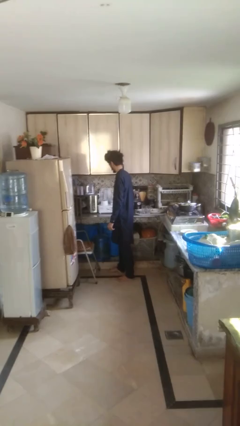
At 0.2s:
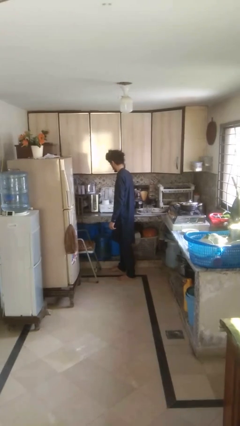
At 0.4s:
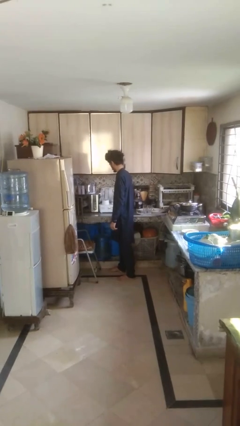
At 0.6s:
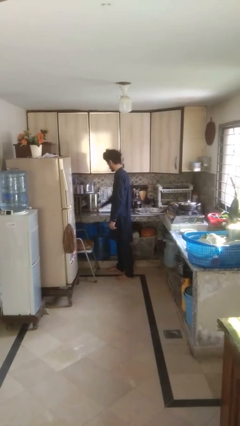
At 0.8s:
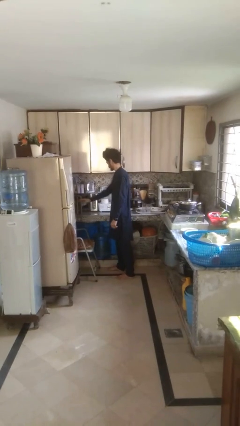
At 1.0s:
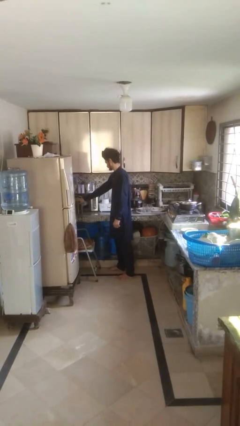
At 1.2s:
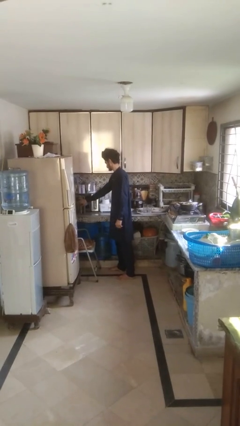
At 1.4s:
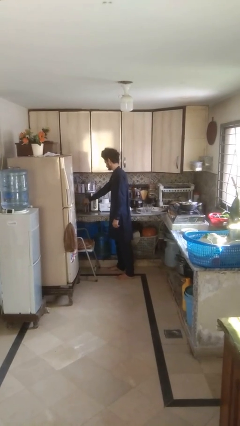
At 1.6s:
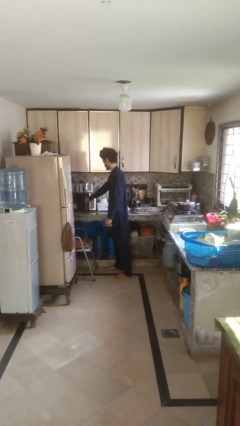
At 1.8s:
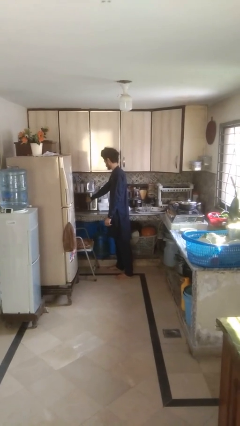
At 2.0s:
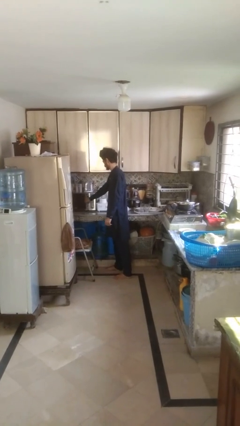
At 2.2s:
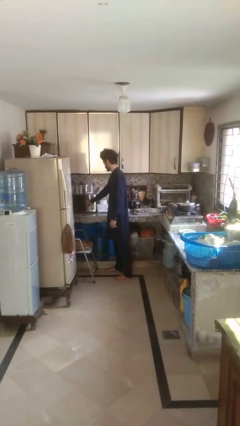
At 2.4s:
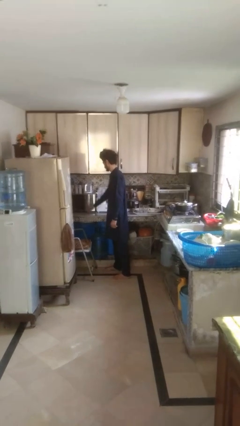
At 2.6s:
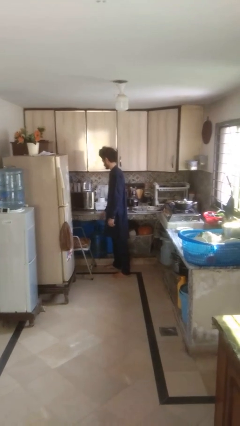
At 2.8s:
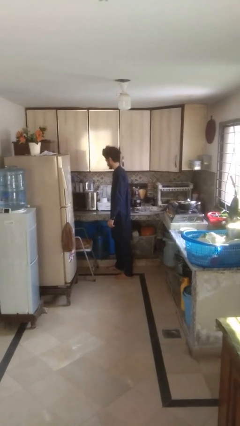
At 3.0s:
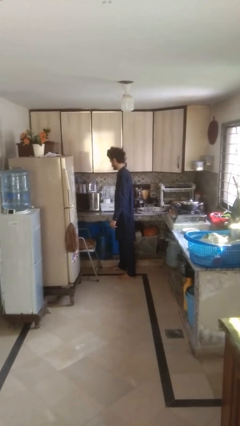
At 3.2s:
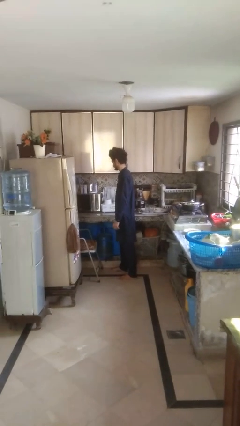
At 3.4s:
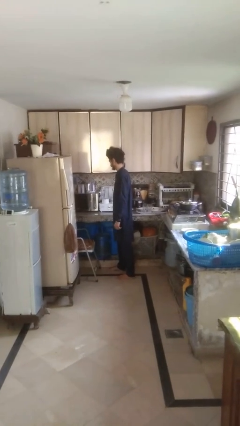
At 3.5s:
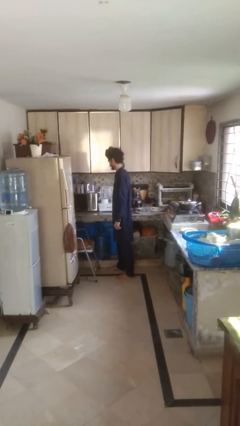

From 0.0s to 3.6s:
person closes oven door

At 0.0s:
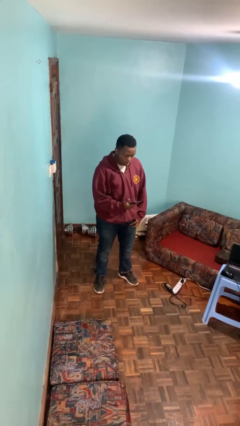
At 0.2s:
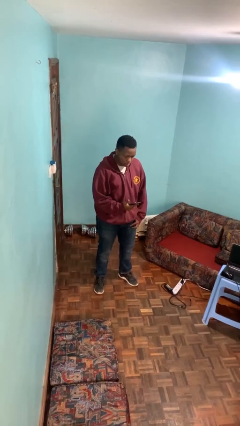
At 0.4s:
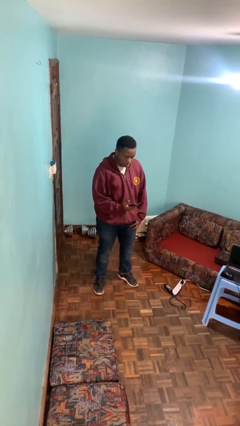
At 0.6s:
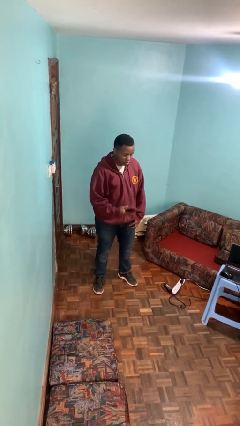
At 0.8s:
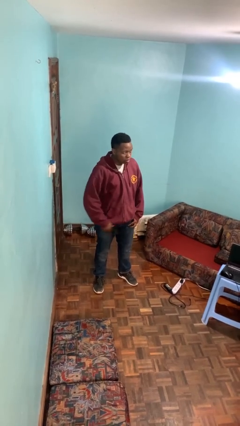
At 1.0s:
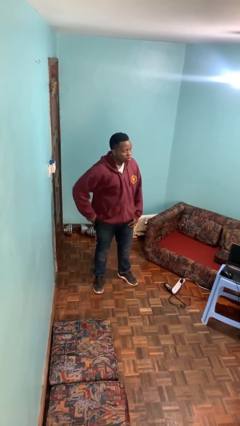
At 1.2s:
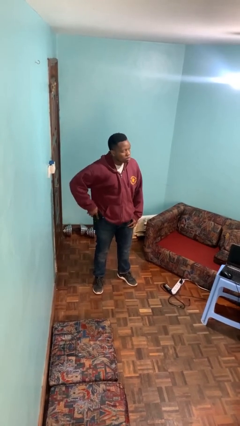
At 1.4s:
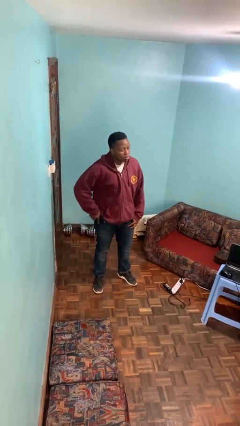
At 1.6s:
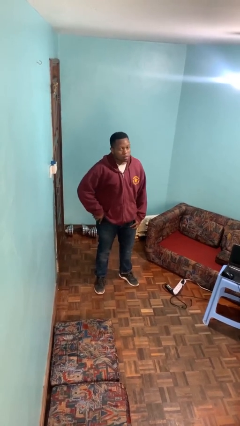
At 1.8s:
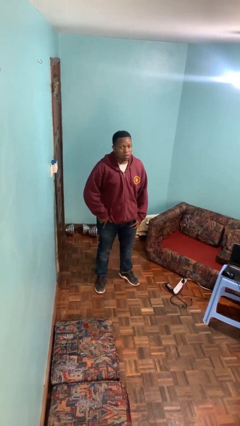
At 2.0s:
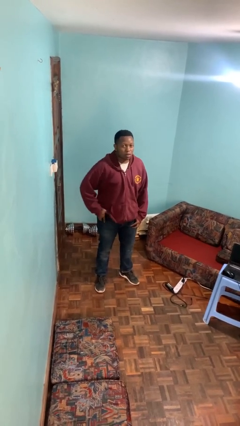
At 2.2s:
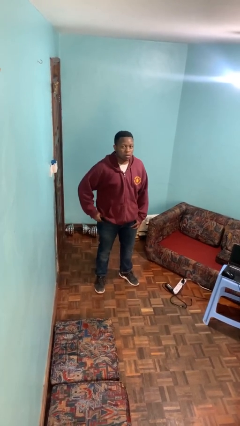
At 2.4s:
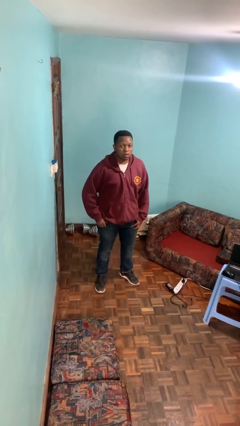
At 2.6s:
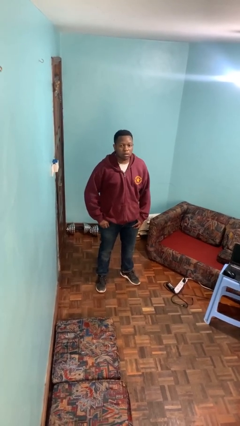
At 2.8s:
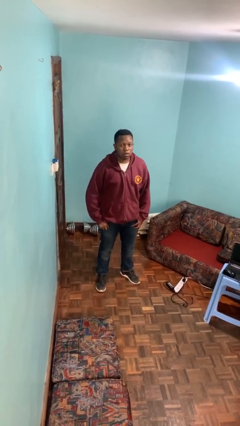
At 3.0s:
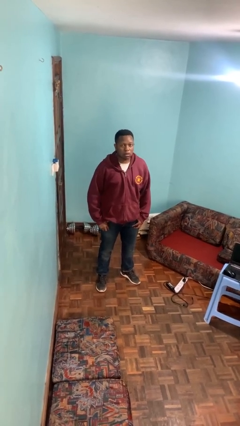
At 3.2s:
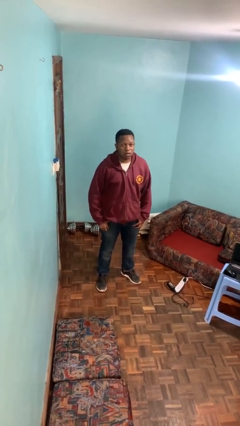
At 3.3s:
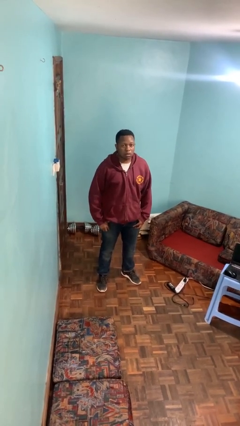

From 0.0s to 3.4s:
person puts phone into pocket

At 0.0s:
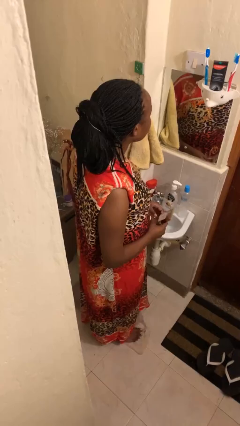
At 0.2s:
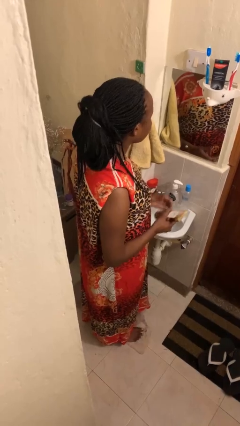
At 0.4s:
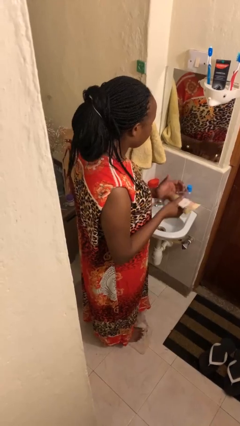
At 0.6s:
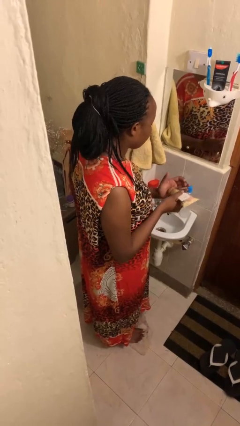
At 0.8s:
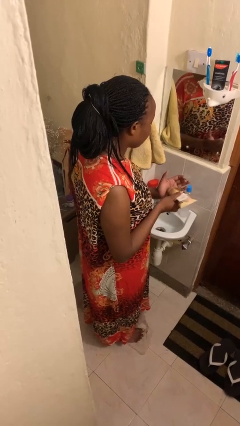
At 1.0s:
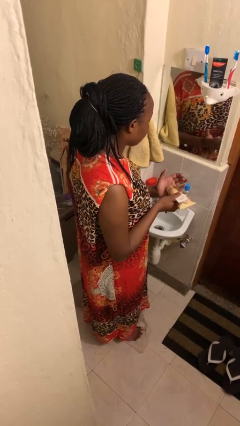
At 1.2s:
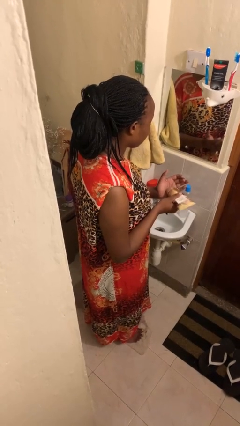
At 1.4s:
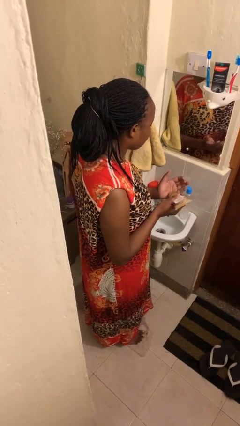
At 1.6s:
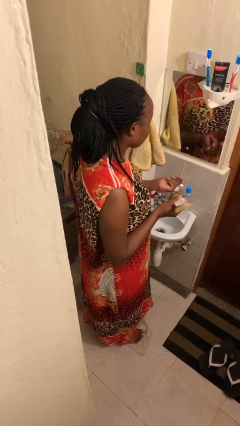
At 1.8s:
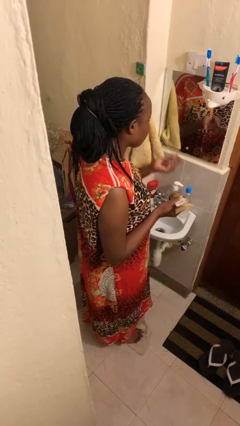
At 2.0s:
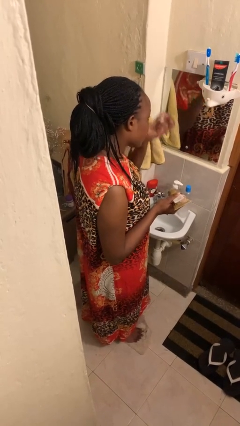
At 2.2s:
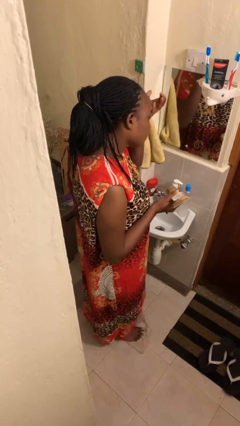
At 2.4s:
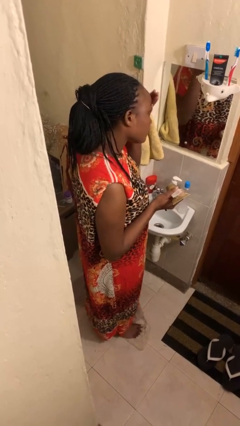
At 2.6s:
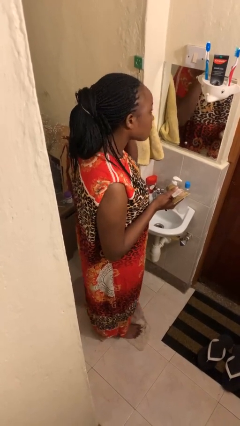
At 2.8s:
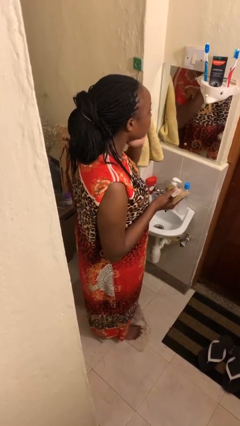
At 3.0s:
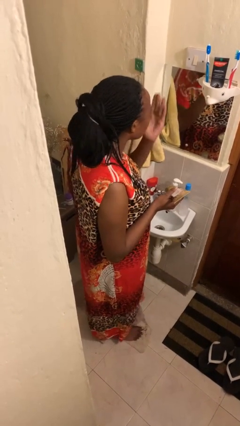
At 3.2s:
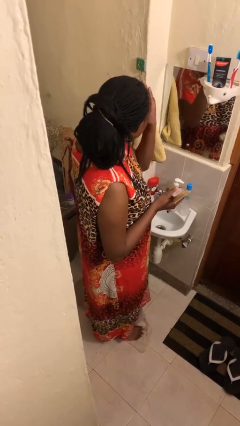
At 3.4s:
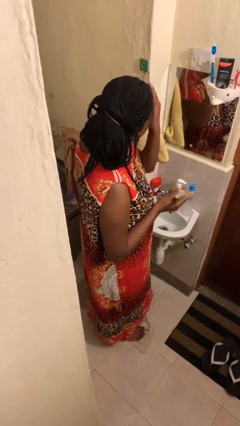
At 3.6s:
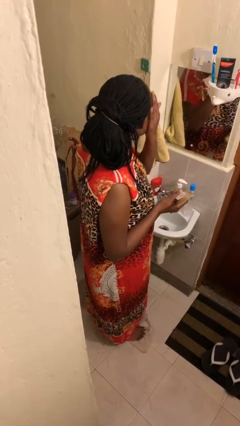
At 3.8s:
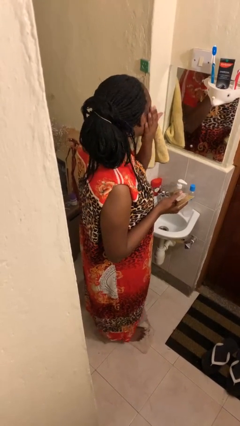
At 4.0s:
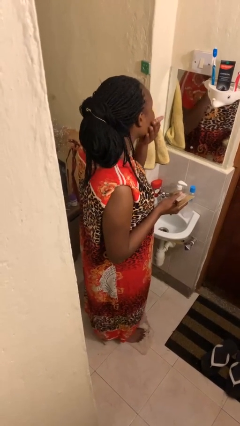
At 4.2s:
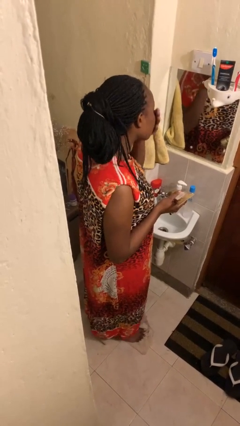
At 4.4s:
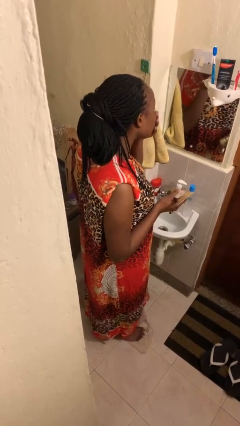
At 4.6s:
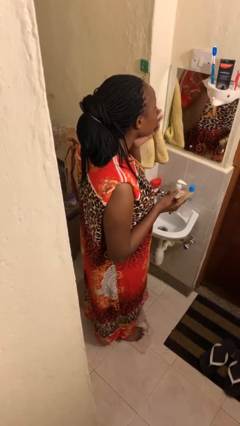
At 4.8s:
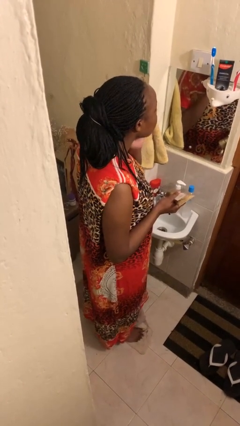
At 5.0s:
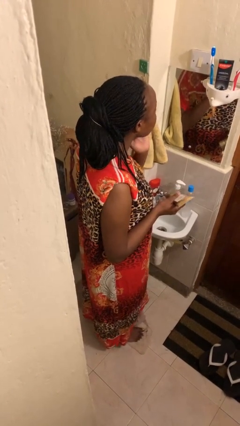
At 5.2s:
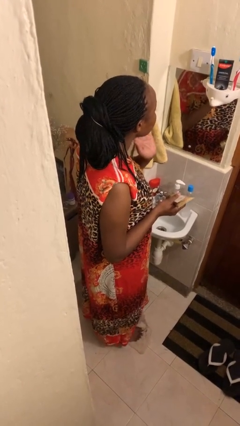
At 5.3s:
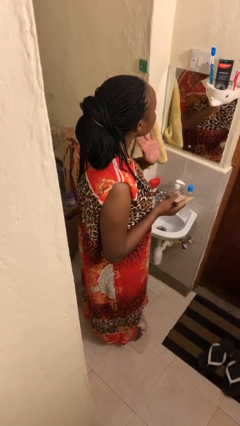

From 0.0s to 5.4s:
person applies facial moisturizer

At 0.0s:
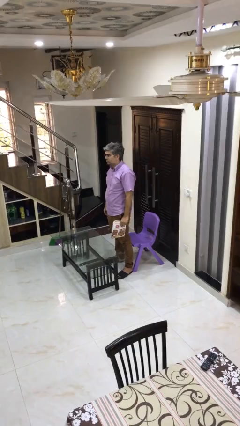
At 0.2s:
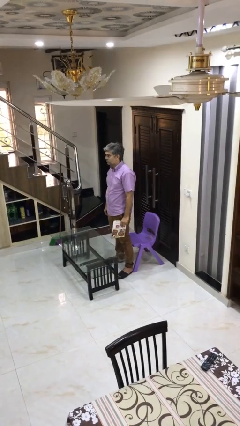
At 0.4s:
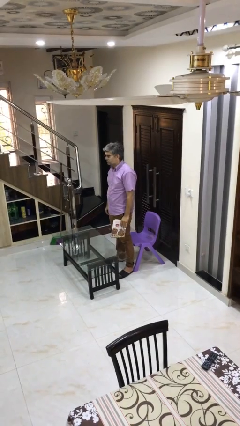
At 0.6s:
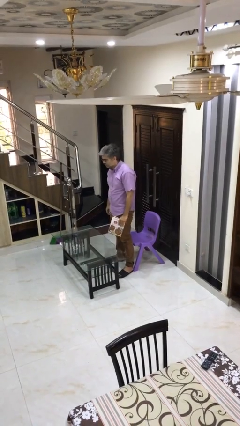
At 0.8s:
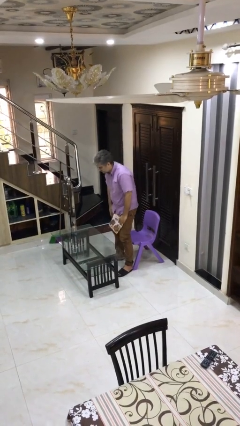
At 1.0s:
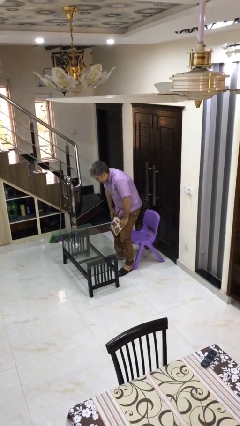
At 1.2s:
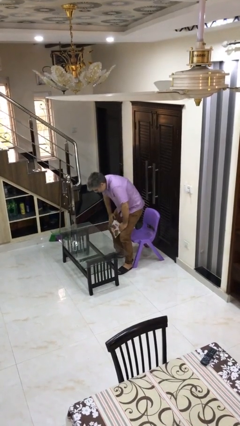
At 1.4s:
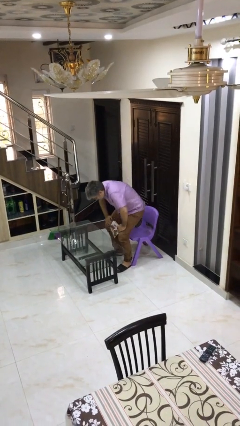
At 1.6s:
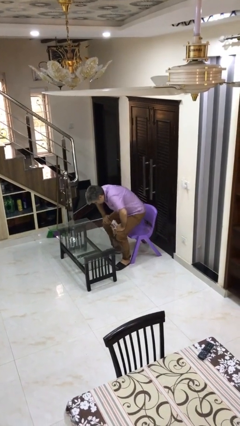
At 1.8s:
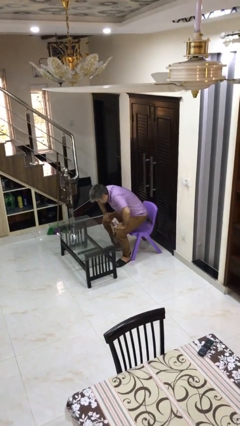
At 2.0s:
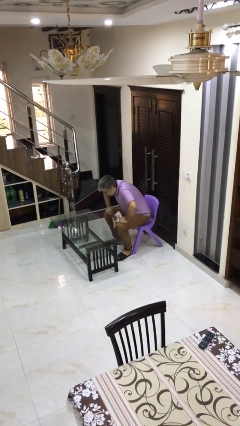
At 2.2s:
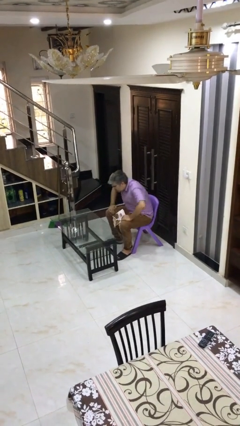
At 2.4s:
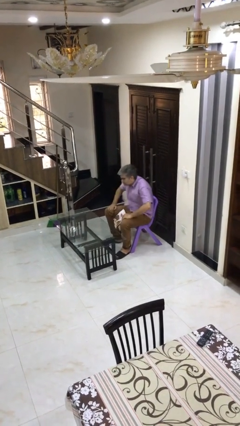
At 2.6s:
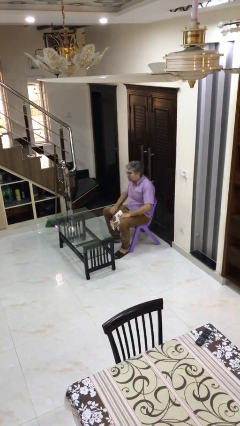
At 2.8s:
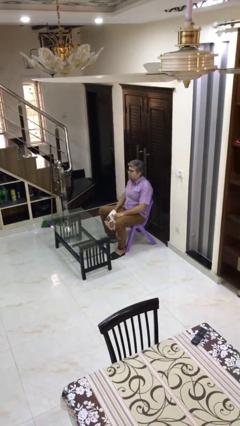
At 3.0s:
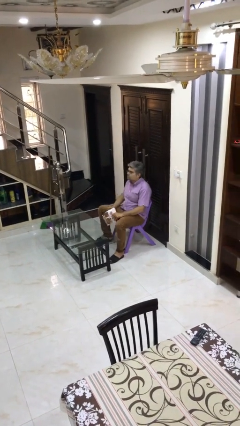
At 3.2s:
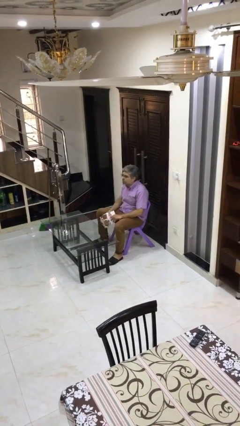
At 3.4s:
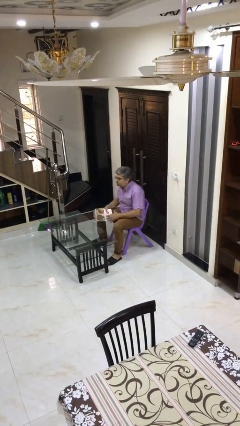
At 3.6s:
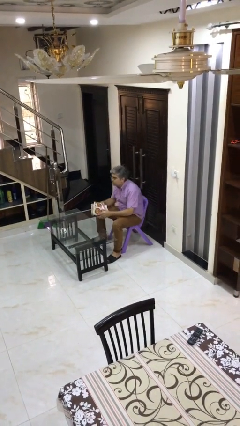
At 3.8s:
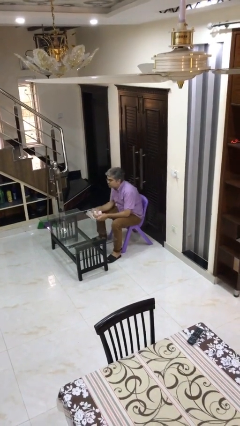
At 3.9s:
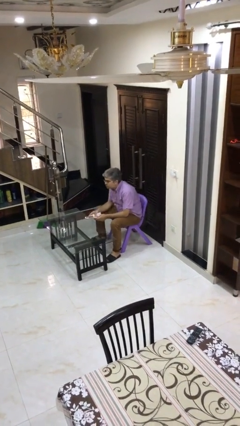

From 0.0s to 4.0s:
person sits down

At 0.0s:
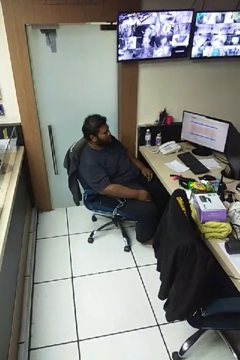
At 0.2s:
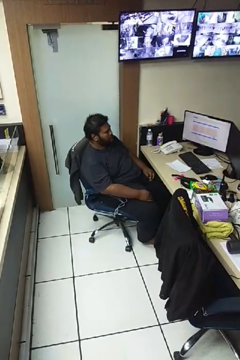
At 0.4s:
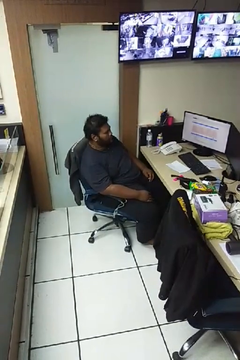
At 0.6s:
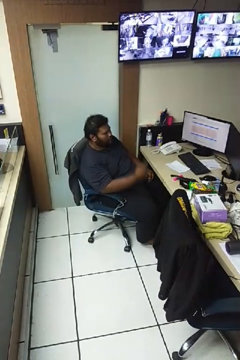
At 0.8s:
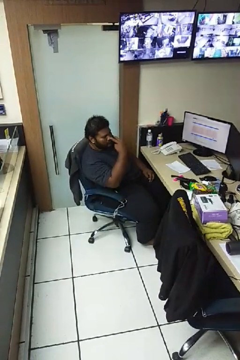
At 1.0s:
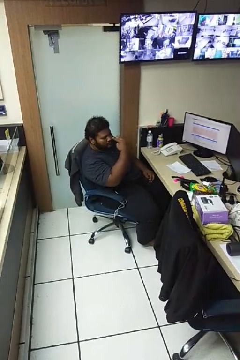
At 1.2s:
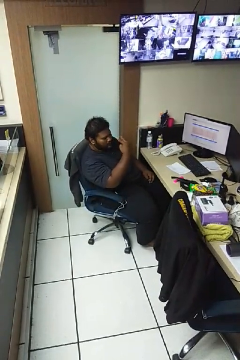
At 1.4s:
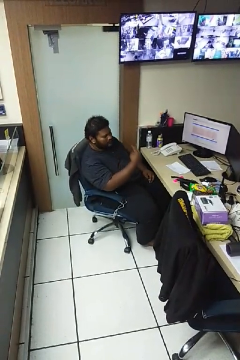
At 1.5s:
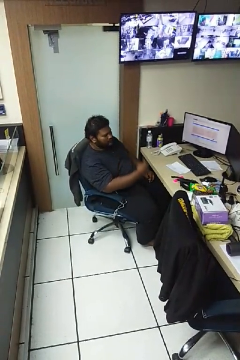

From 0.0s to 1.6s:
person gestures watch closely
